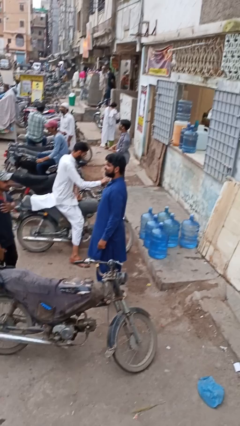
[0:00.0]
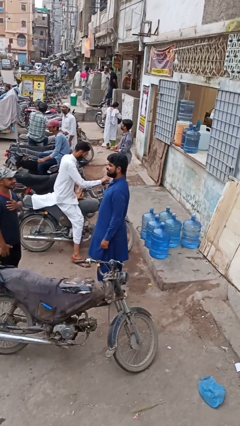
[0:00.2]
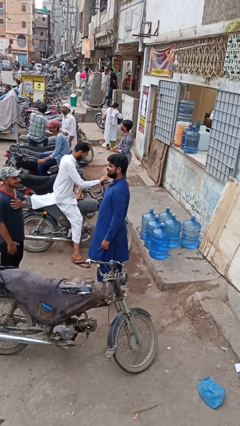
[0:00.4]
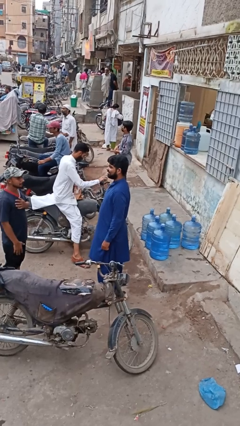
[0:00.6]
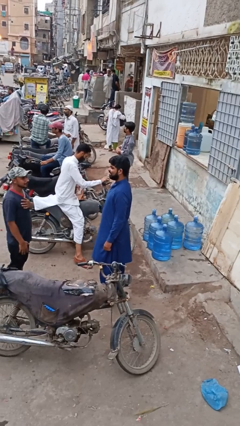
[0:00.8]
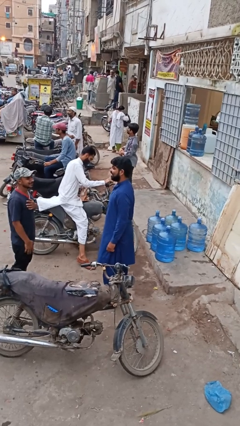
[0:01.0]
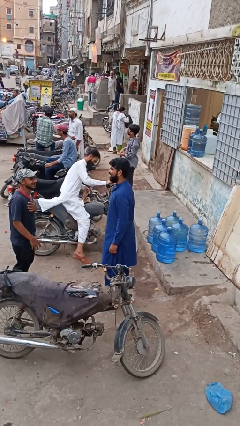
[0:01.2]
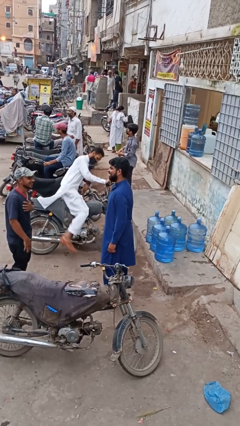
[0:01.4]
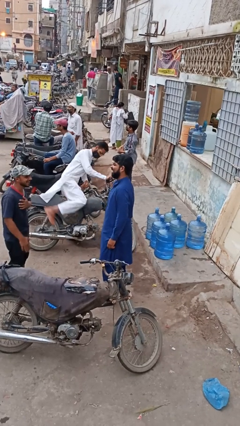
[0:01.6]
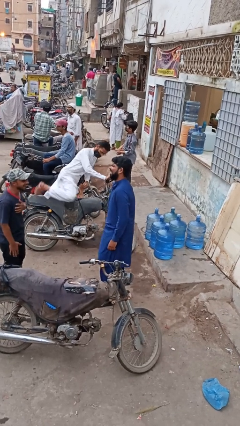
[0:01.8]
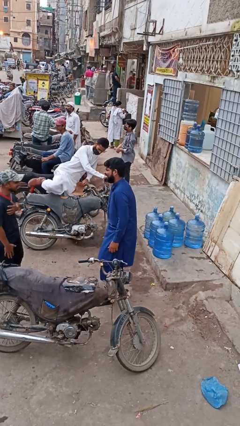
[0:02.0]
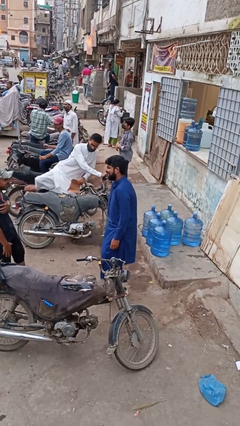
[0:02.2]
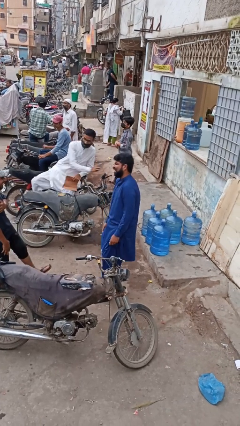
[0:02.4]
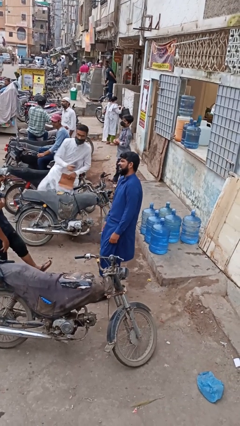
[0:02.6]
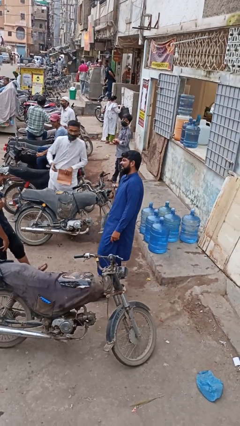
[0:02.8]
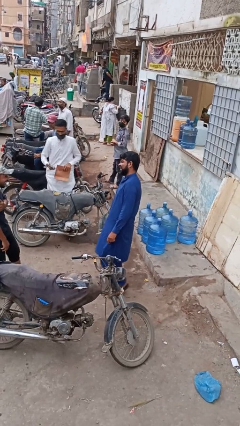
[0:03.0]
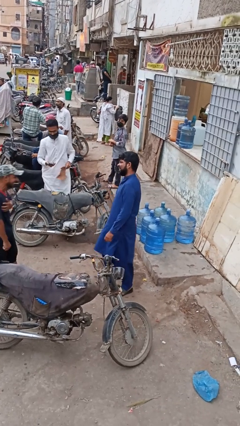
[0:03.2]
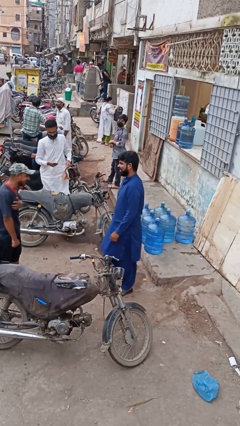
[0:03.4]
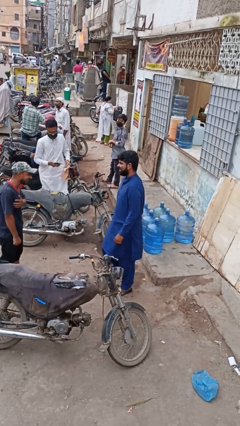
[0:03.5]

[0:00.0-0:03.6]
person laughs with person

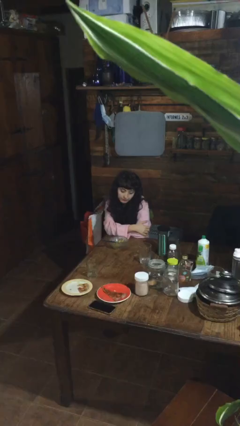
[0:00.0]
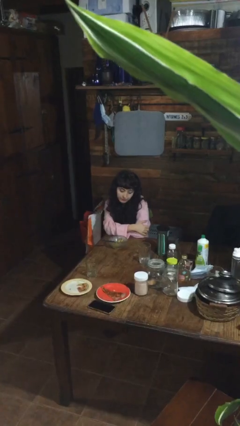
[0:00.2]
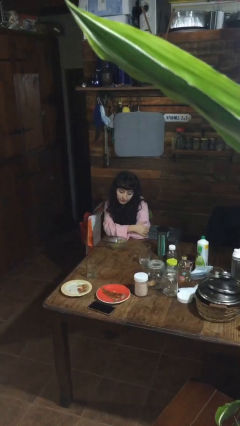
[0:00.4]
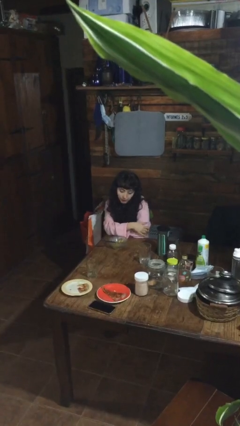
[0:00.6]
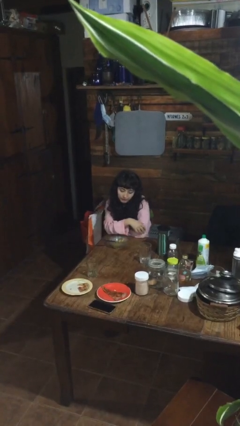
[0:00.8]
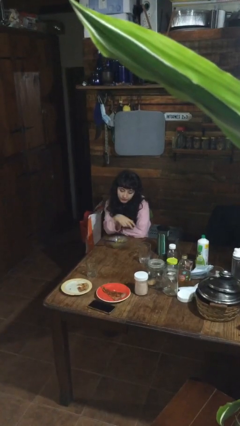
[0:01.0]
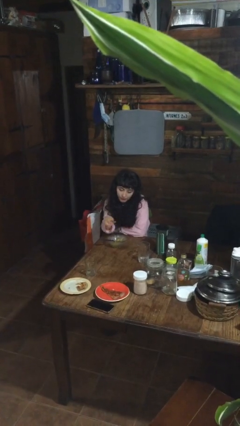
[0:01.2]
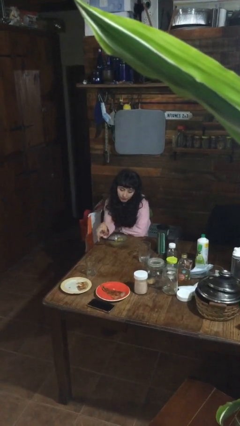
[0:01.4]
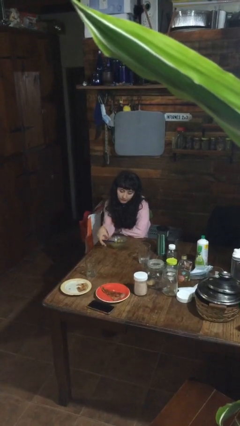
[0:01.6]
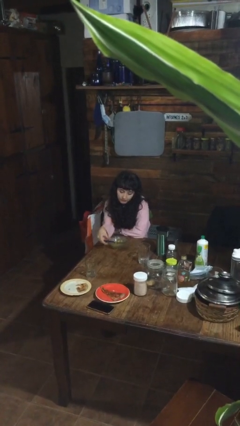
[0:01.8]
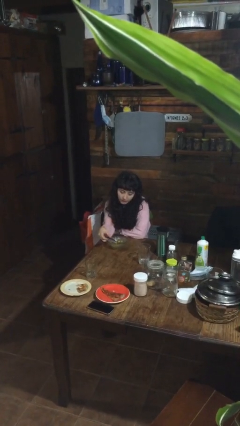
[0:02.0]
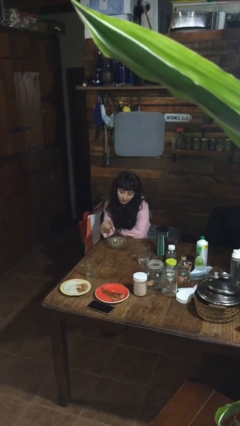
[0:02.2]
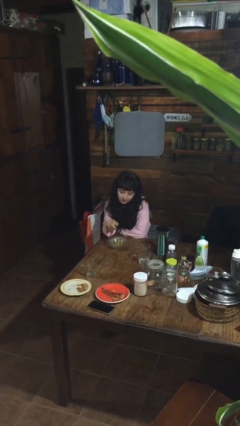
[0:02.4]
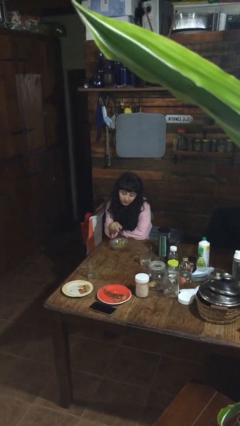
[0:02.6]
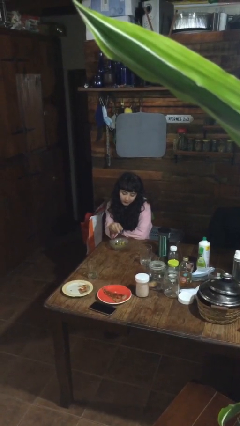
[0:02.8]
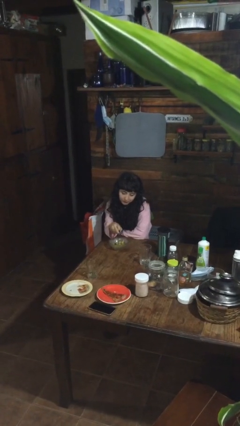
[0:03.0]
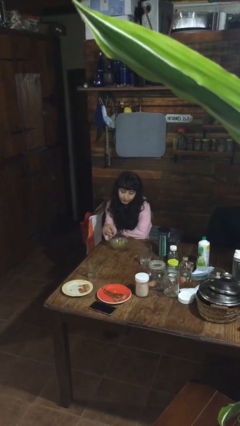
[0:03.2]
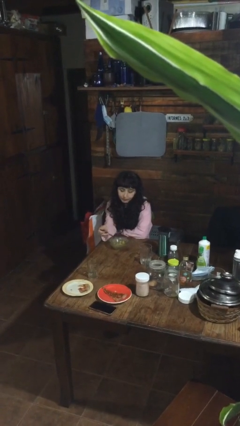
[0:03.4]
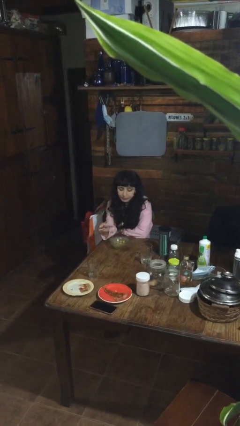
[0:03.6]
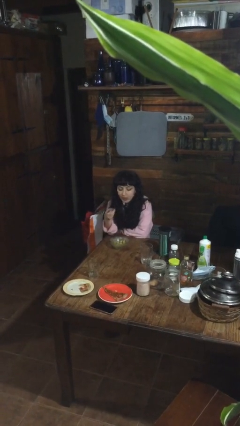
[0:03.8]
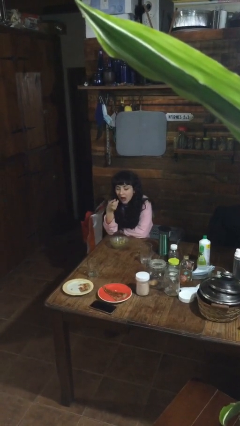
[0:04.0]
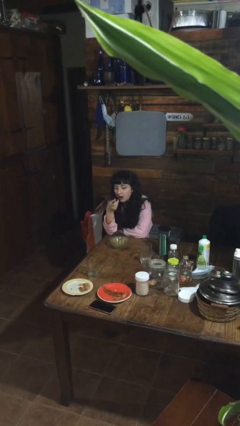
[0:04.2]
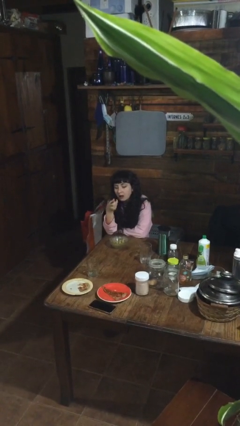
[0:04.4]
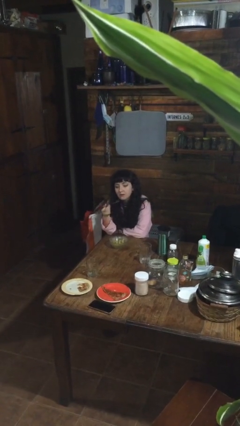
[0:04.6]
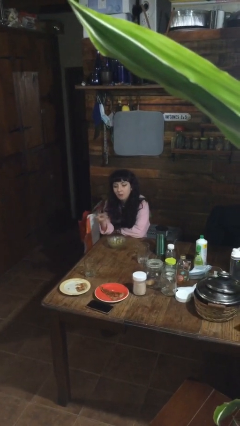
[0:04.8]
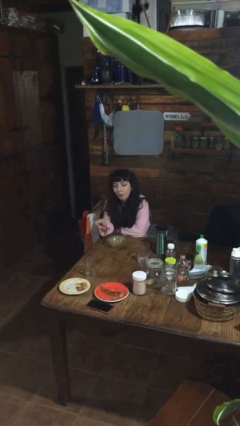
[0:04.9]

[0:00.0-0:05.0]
person eats with utensil

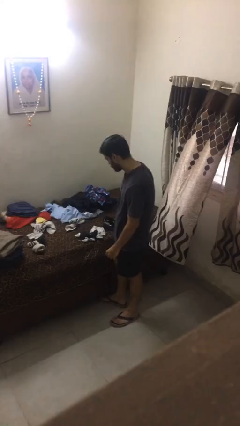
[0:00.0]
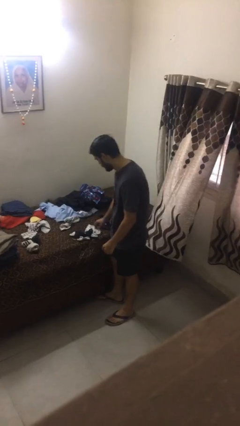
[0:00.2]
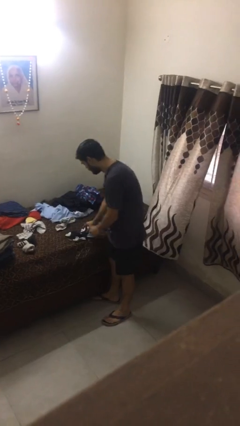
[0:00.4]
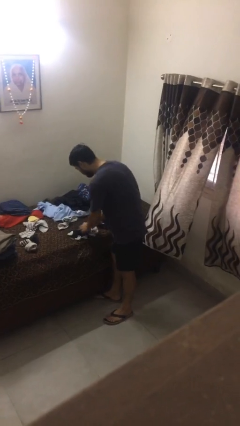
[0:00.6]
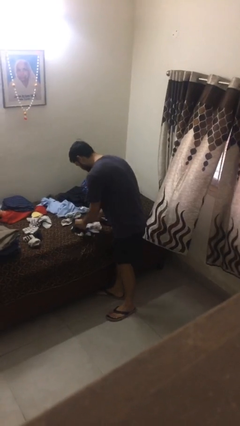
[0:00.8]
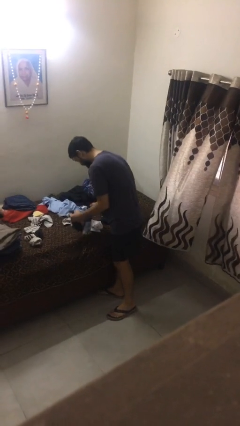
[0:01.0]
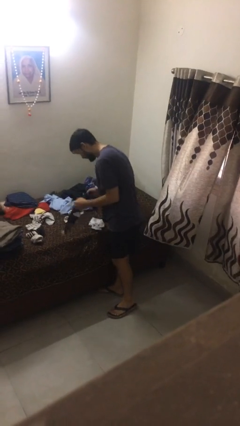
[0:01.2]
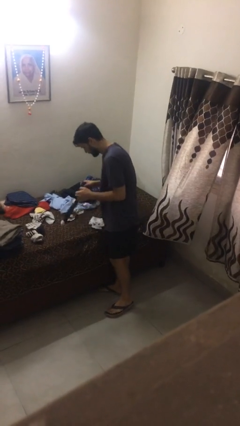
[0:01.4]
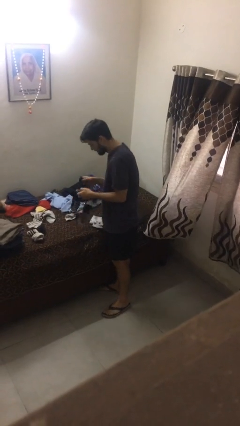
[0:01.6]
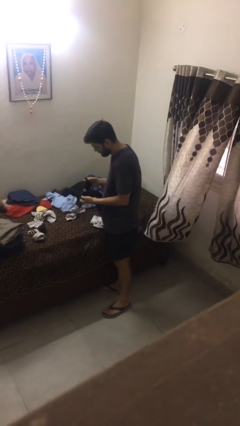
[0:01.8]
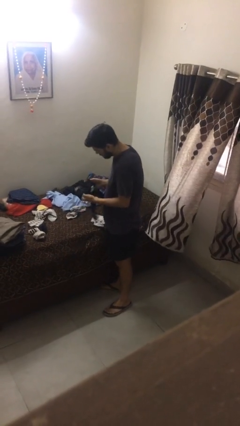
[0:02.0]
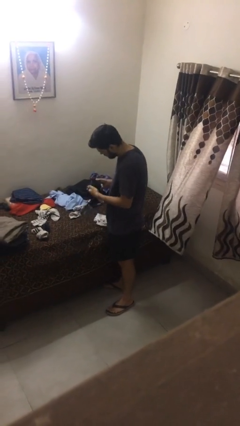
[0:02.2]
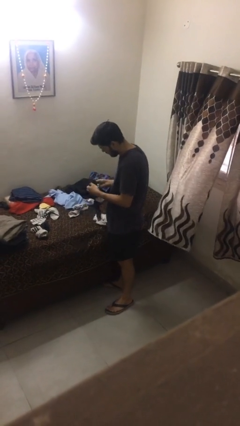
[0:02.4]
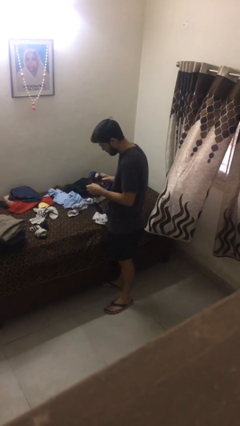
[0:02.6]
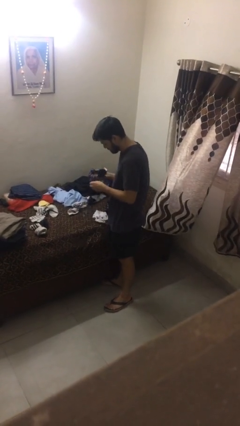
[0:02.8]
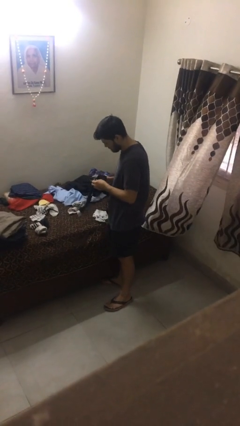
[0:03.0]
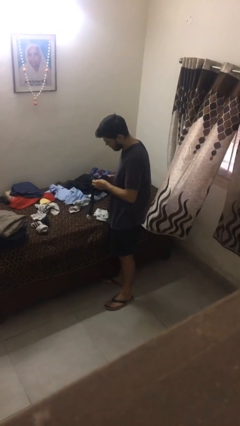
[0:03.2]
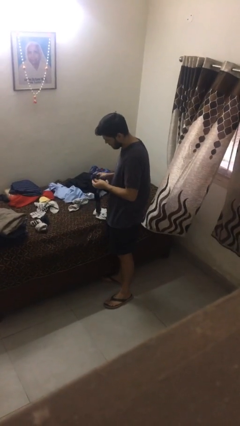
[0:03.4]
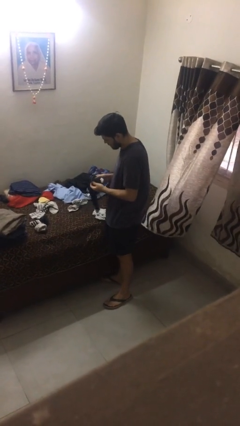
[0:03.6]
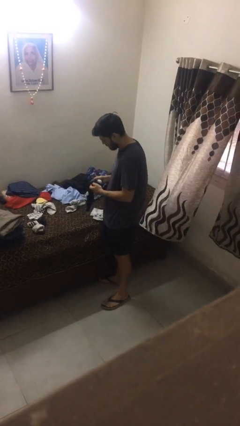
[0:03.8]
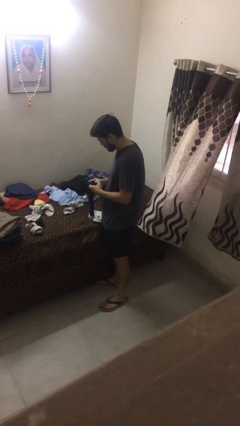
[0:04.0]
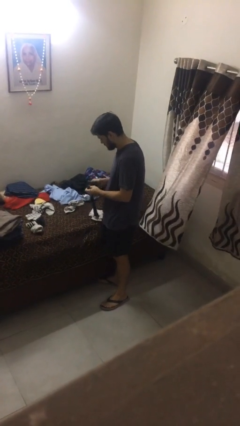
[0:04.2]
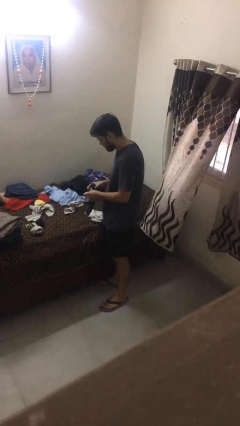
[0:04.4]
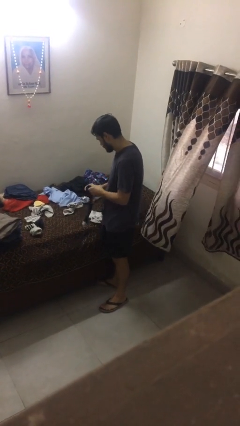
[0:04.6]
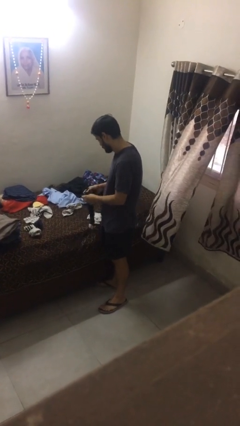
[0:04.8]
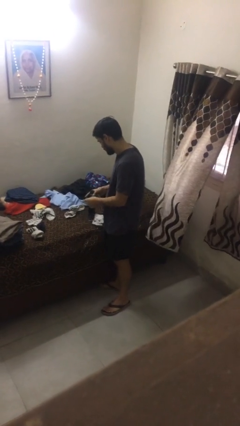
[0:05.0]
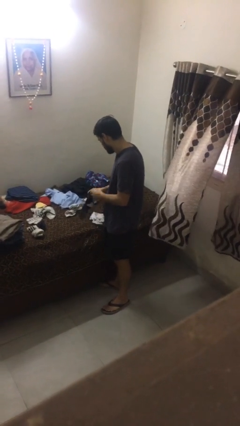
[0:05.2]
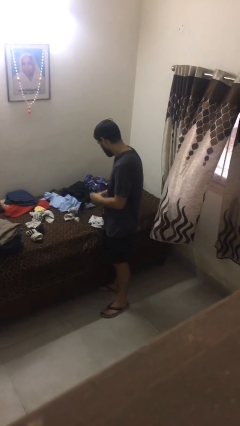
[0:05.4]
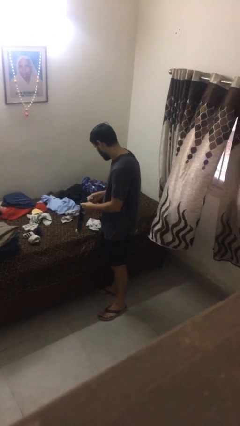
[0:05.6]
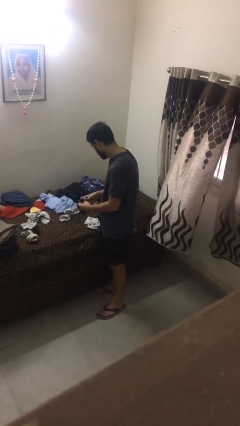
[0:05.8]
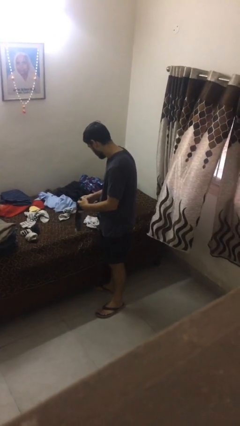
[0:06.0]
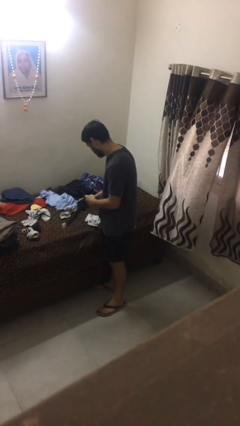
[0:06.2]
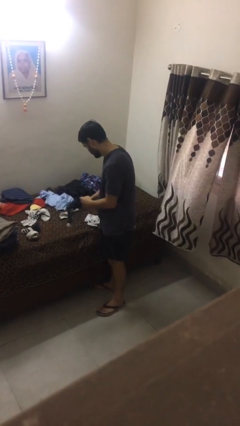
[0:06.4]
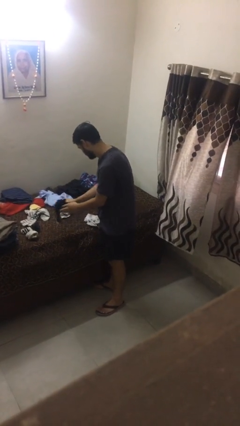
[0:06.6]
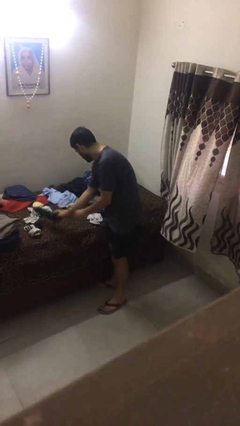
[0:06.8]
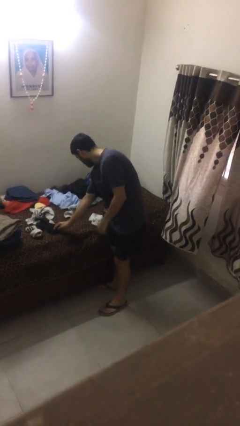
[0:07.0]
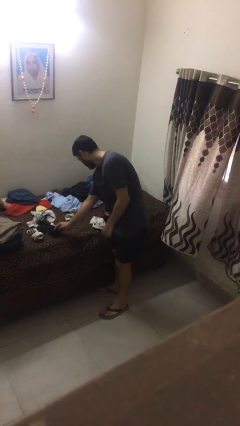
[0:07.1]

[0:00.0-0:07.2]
person folds socks

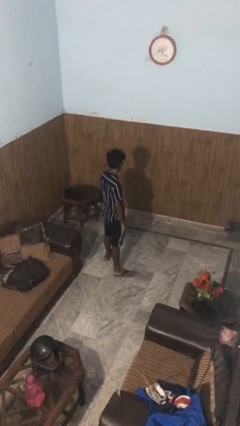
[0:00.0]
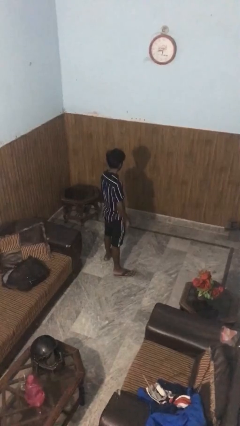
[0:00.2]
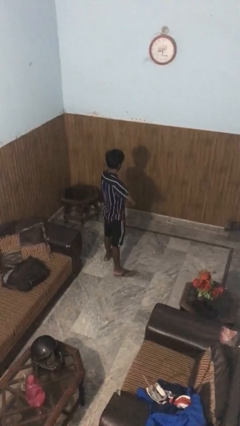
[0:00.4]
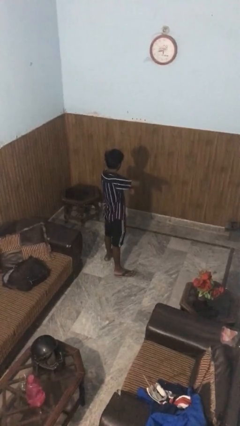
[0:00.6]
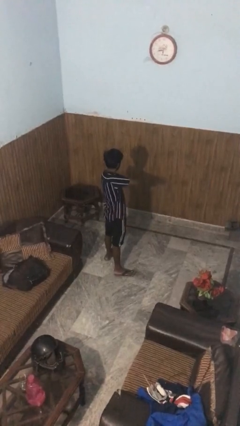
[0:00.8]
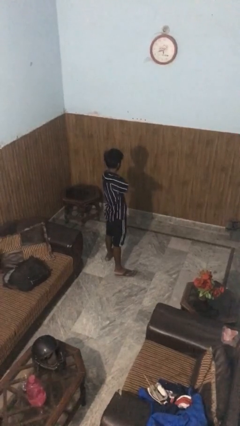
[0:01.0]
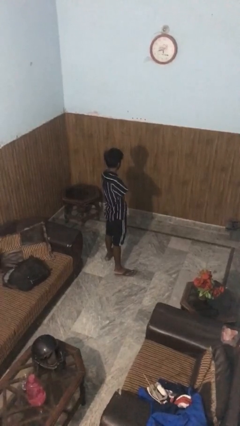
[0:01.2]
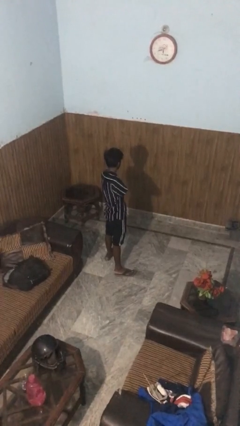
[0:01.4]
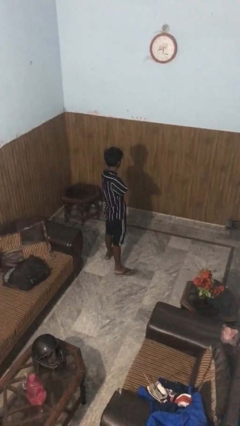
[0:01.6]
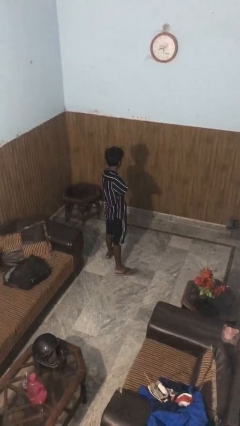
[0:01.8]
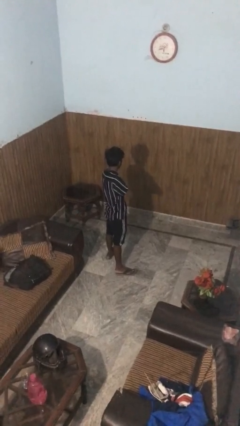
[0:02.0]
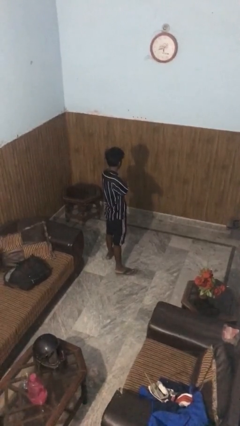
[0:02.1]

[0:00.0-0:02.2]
person crosses arms
